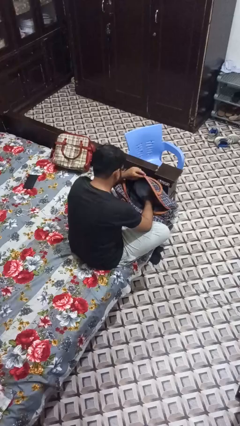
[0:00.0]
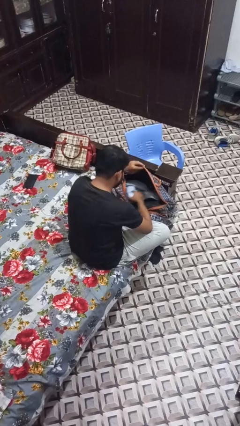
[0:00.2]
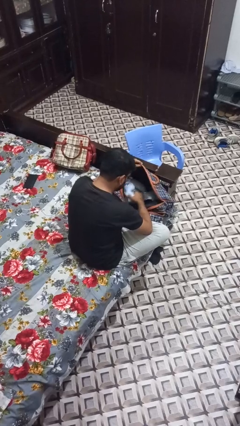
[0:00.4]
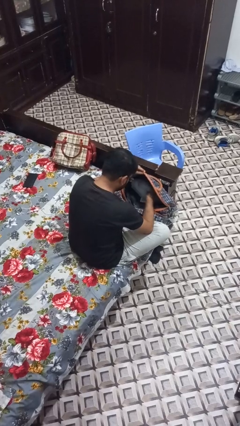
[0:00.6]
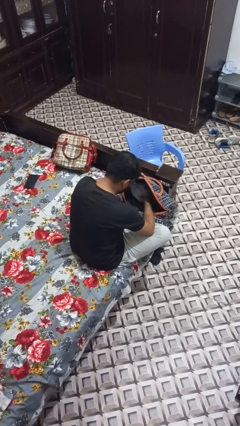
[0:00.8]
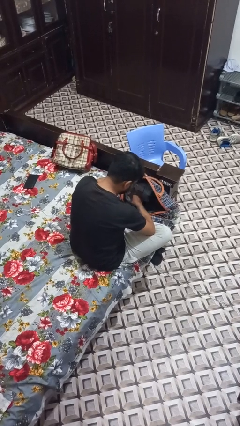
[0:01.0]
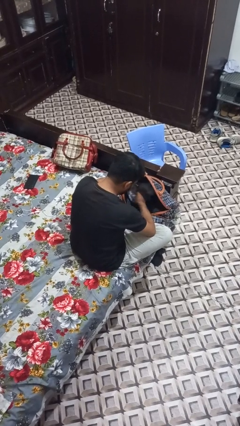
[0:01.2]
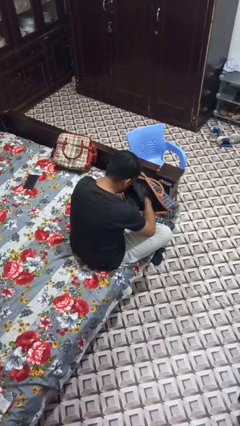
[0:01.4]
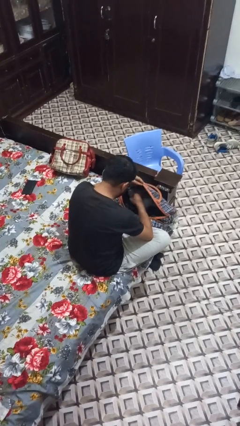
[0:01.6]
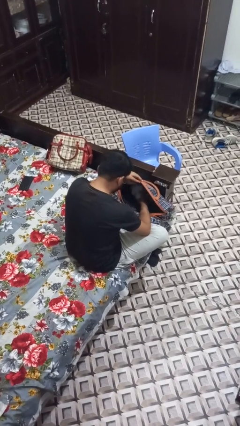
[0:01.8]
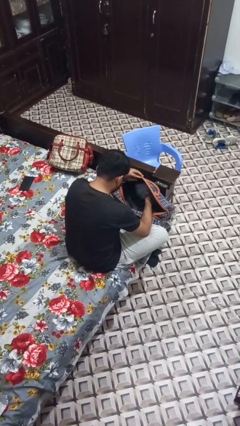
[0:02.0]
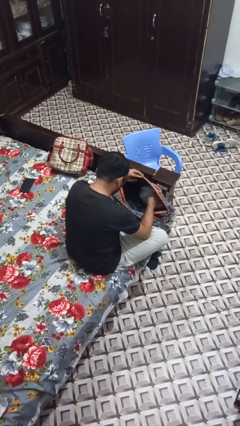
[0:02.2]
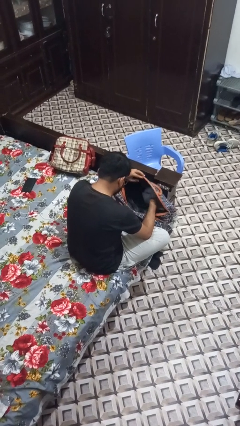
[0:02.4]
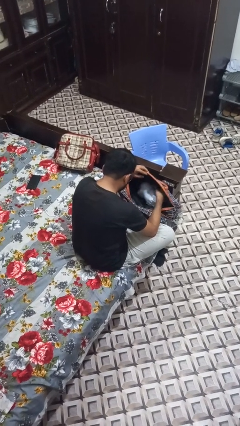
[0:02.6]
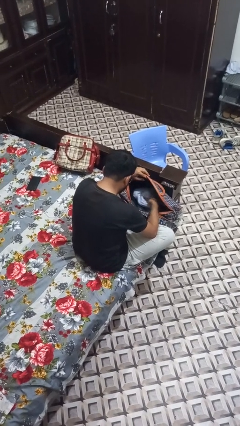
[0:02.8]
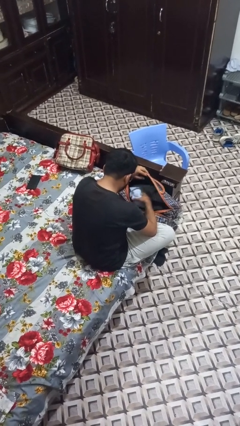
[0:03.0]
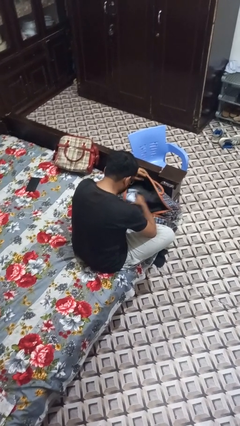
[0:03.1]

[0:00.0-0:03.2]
person searches in backpack

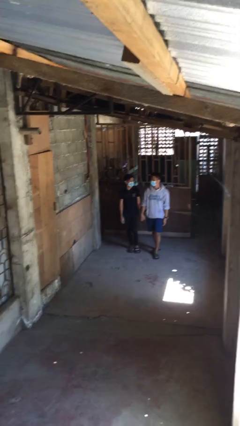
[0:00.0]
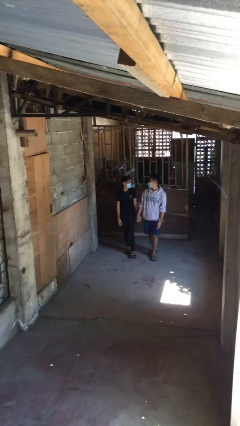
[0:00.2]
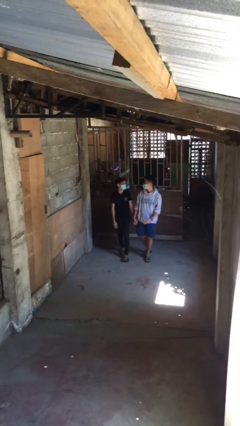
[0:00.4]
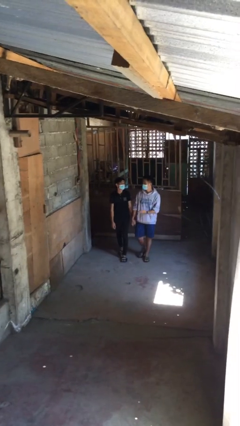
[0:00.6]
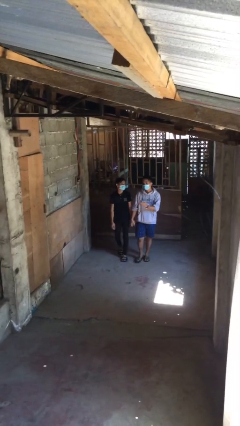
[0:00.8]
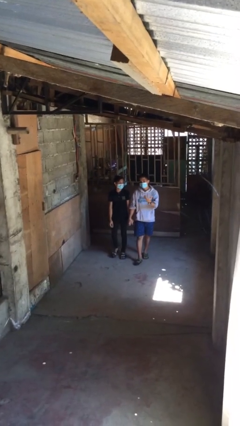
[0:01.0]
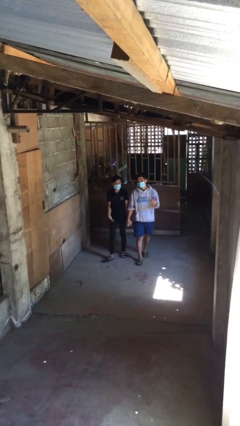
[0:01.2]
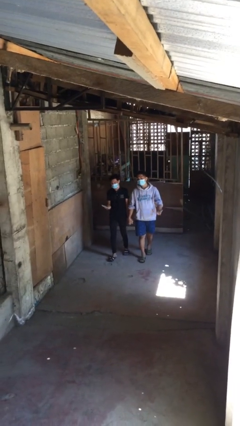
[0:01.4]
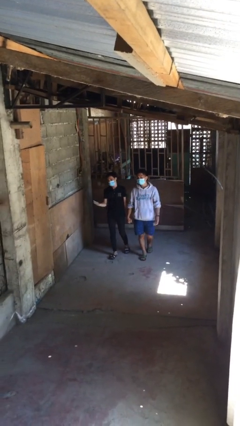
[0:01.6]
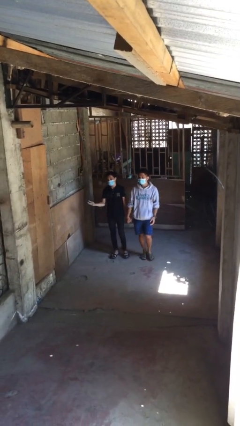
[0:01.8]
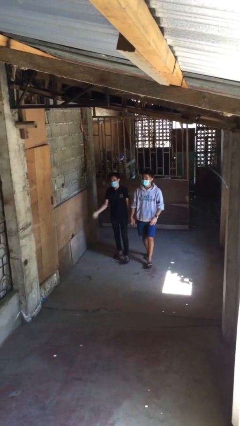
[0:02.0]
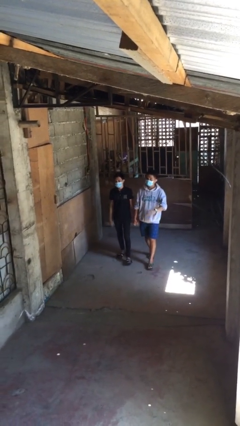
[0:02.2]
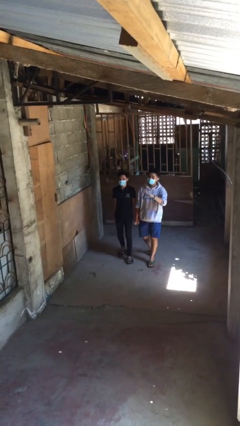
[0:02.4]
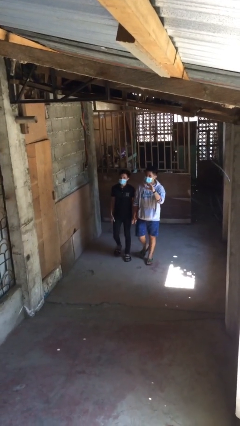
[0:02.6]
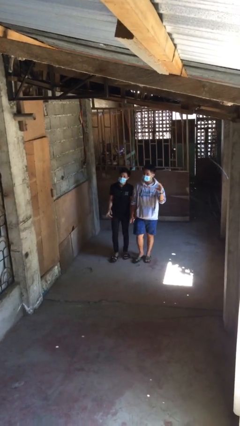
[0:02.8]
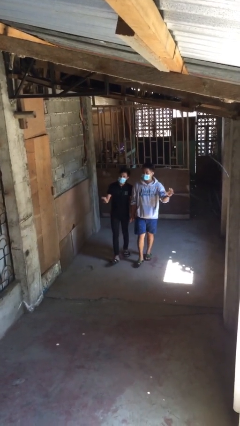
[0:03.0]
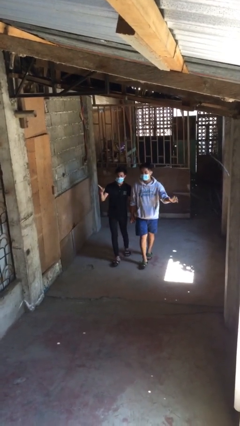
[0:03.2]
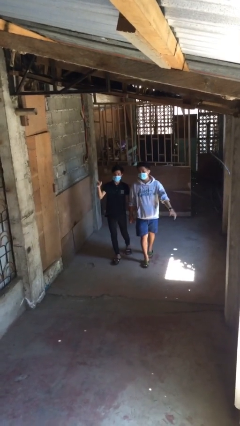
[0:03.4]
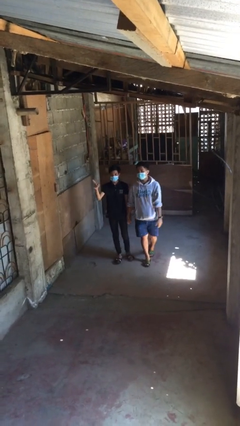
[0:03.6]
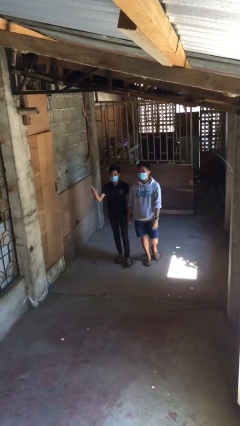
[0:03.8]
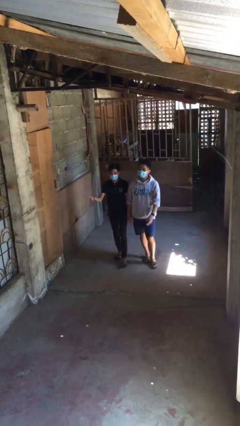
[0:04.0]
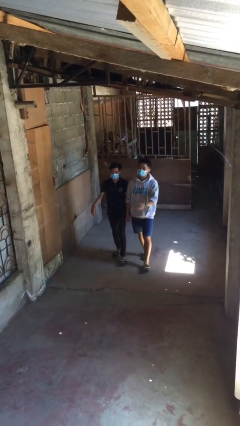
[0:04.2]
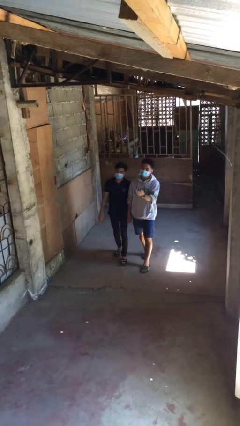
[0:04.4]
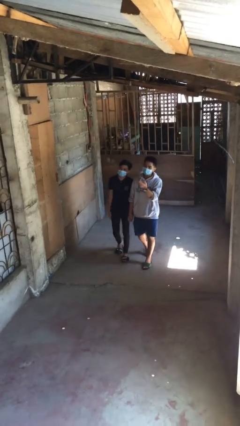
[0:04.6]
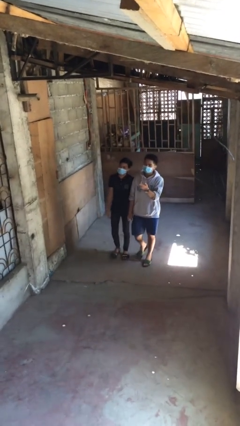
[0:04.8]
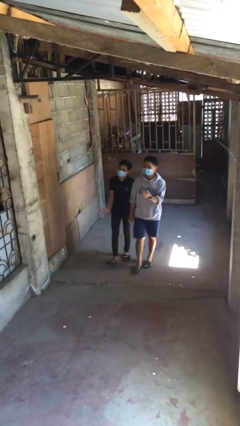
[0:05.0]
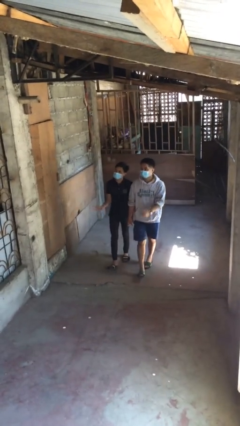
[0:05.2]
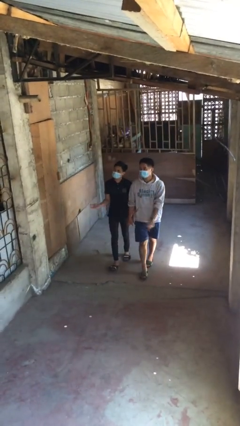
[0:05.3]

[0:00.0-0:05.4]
person holds hand

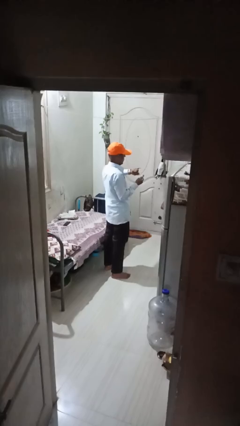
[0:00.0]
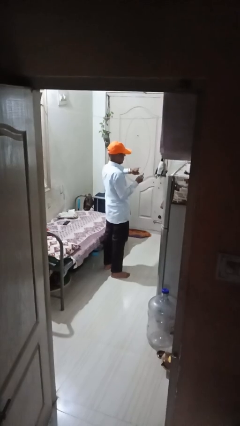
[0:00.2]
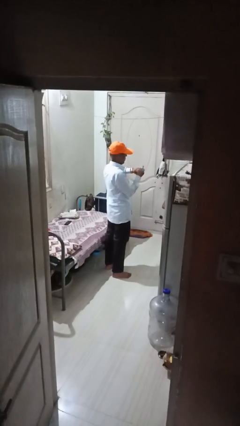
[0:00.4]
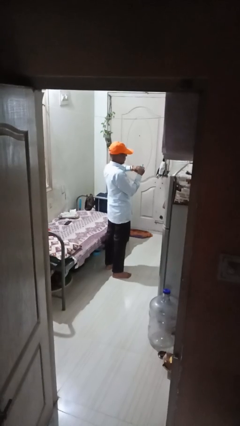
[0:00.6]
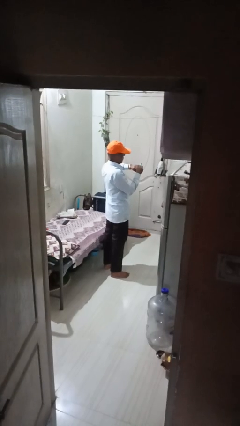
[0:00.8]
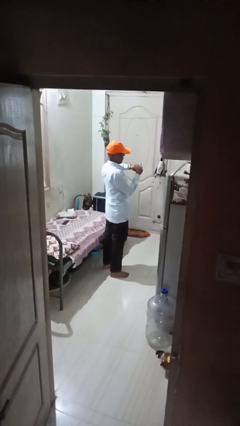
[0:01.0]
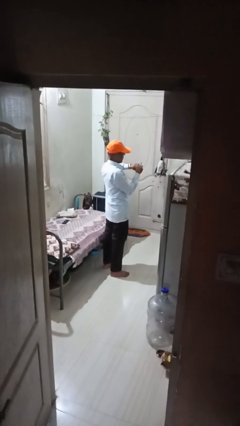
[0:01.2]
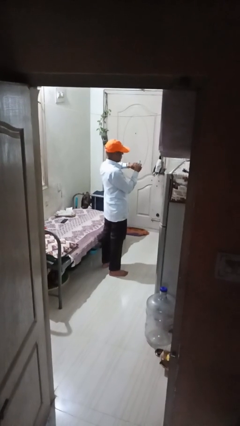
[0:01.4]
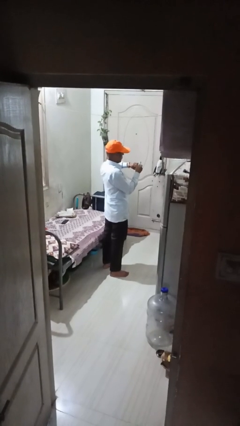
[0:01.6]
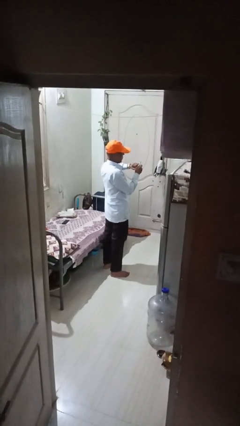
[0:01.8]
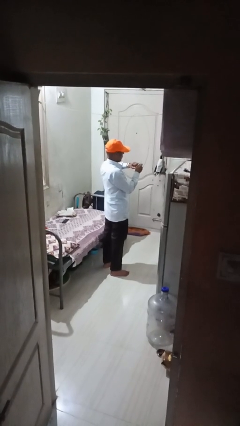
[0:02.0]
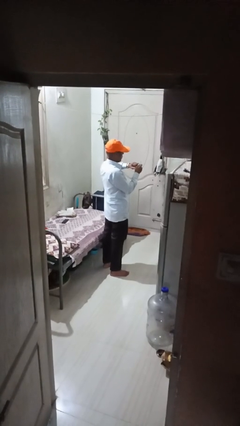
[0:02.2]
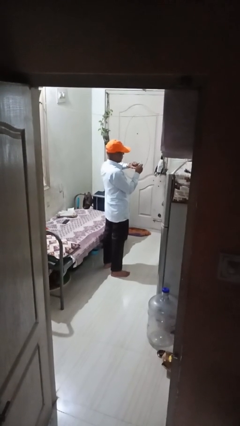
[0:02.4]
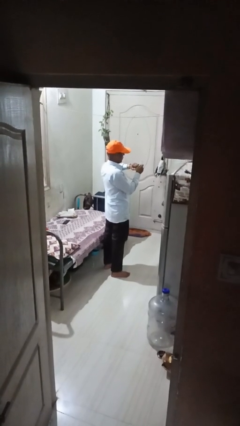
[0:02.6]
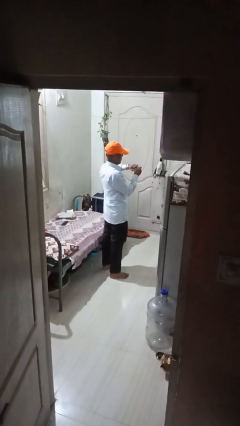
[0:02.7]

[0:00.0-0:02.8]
person files fingernails

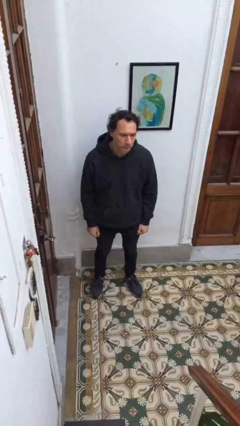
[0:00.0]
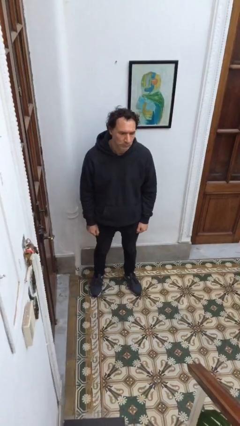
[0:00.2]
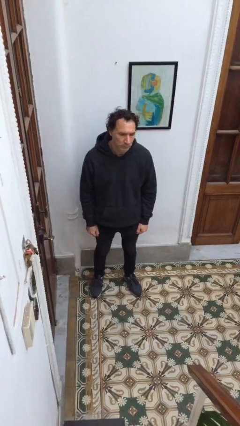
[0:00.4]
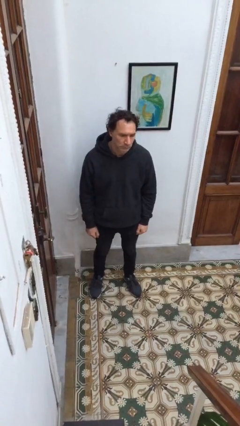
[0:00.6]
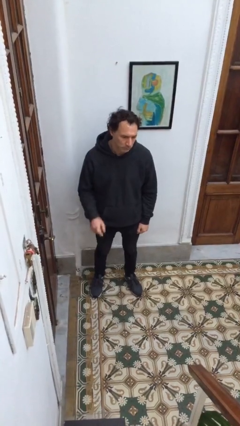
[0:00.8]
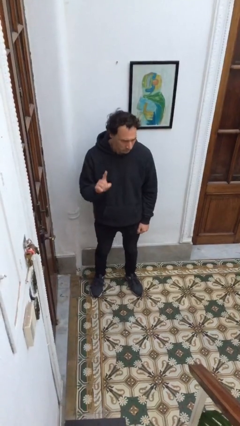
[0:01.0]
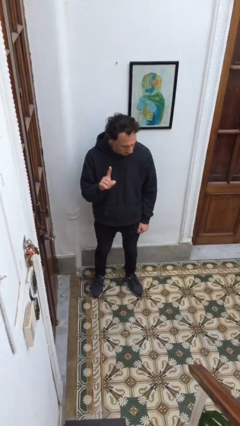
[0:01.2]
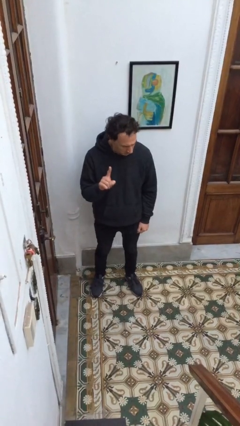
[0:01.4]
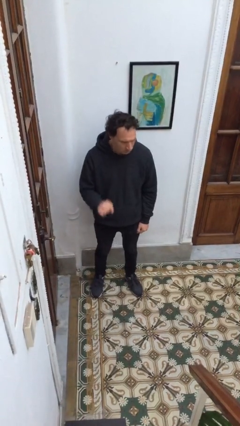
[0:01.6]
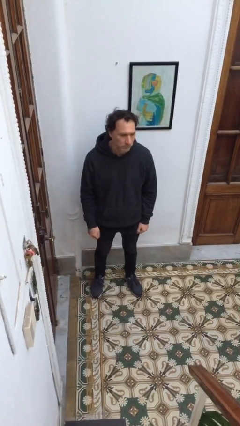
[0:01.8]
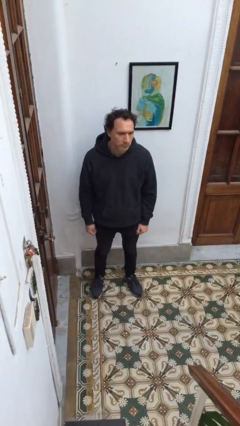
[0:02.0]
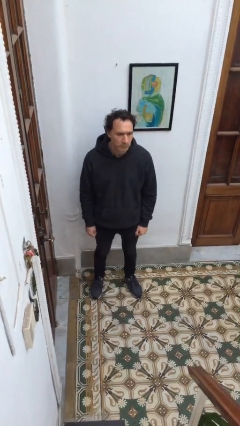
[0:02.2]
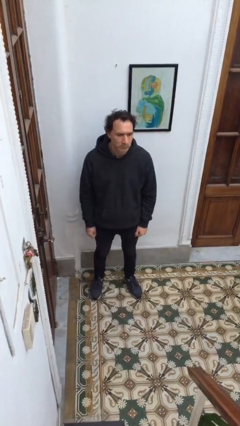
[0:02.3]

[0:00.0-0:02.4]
person gestures number one

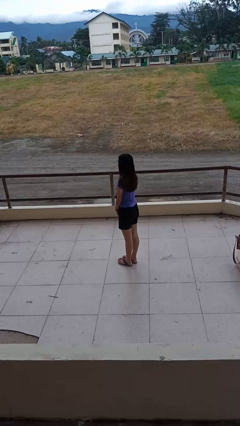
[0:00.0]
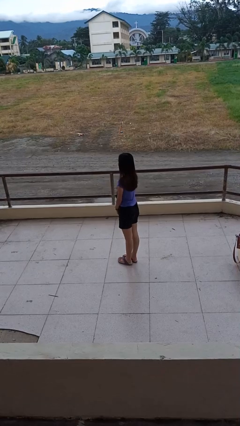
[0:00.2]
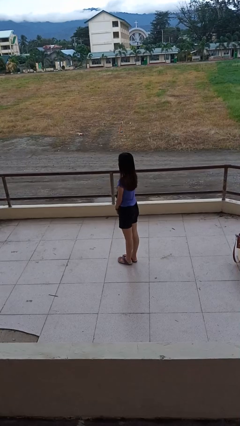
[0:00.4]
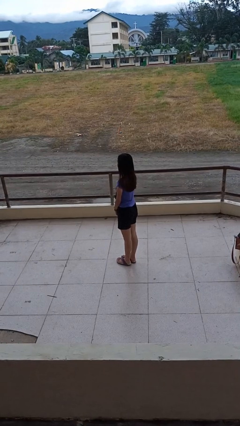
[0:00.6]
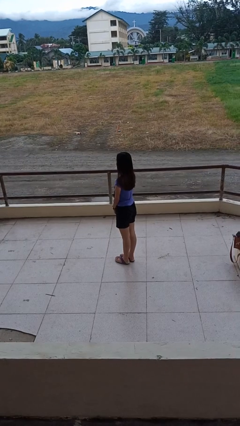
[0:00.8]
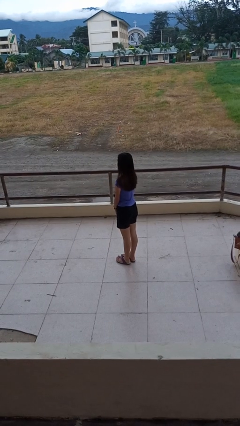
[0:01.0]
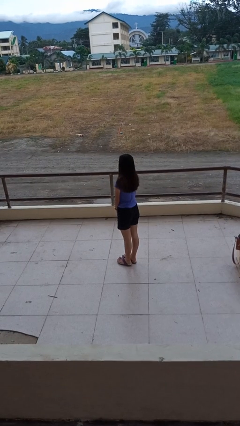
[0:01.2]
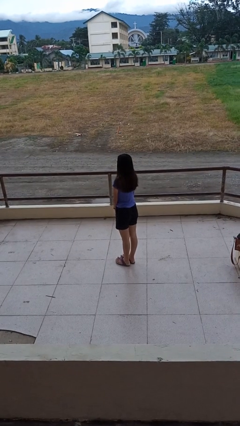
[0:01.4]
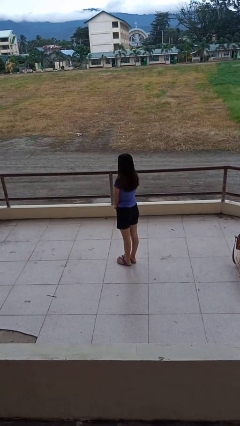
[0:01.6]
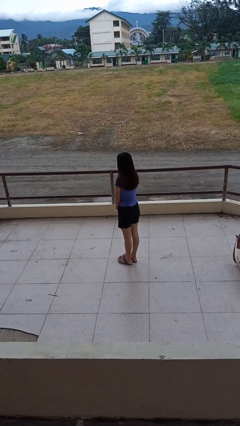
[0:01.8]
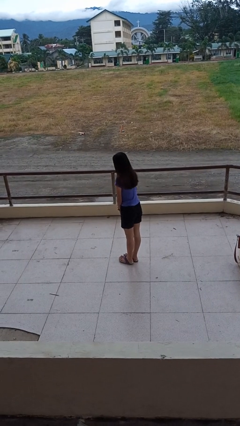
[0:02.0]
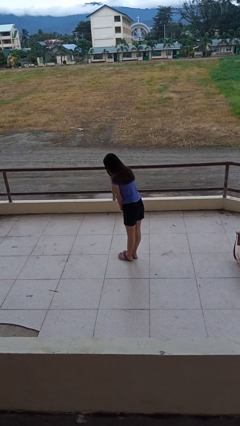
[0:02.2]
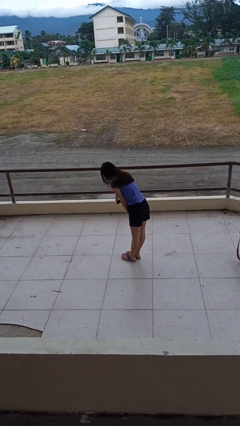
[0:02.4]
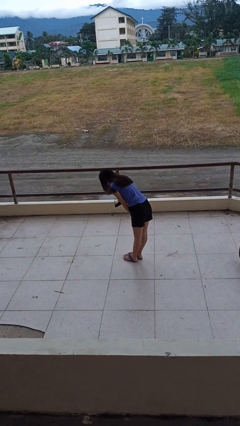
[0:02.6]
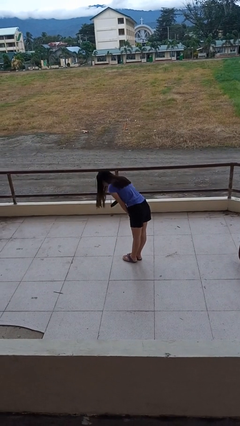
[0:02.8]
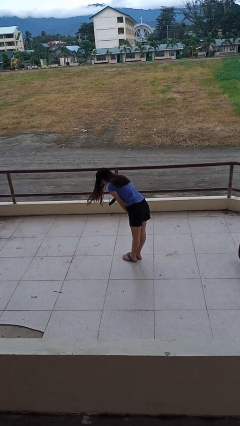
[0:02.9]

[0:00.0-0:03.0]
person bows

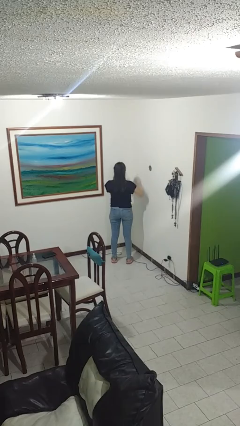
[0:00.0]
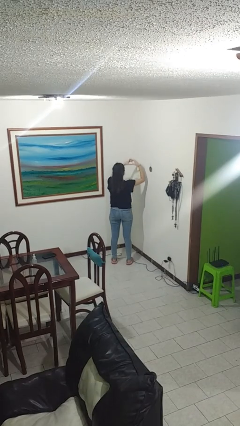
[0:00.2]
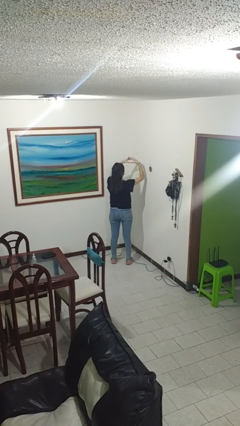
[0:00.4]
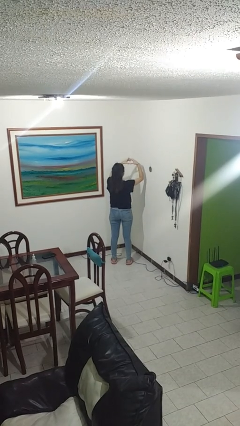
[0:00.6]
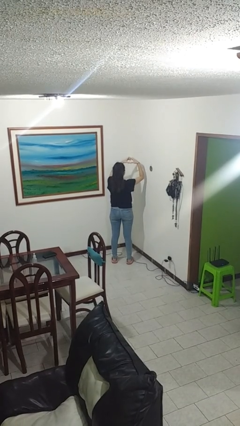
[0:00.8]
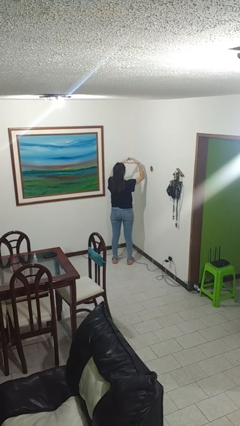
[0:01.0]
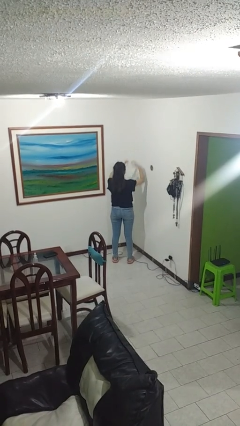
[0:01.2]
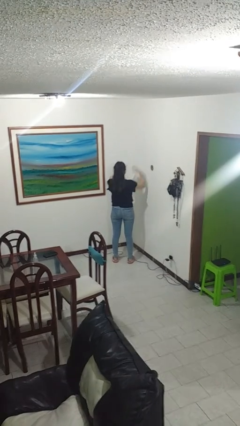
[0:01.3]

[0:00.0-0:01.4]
person gestures heart
